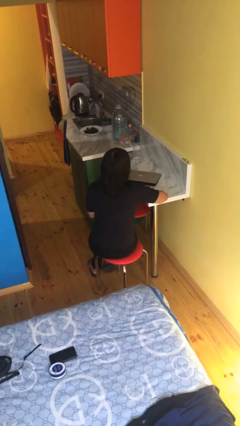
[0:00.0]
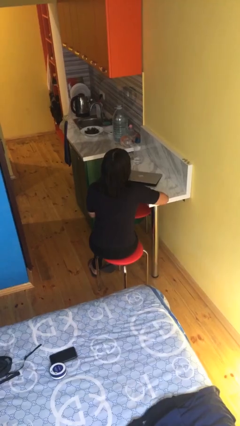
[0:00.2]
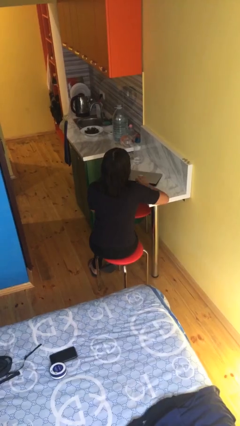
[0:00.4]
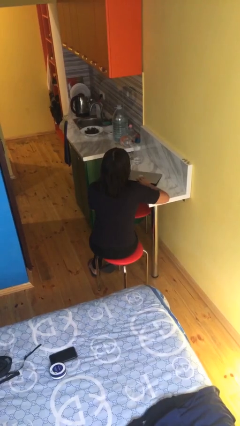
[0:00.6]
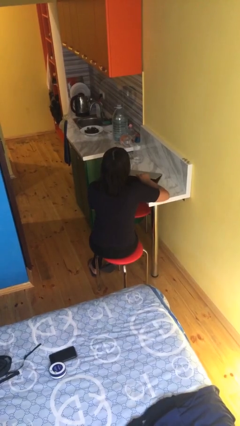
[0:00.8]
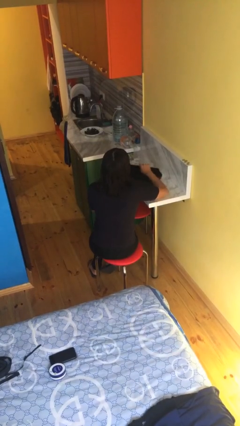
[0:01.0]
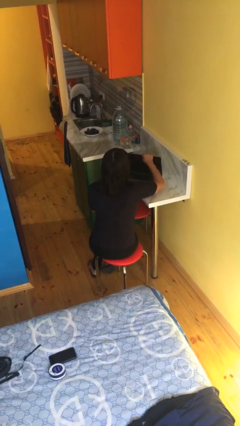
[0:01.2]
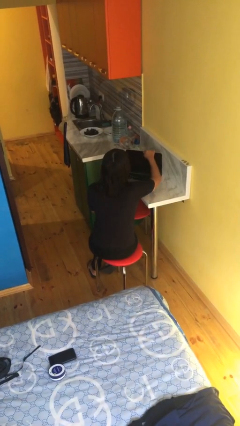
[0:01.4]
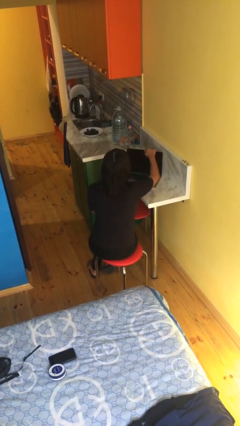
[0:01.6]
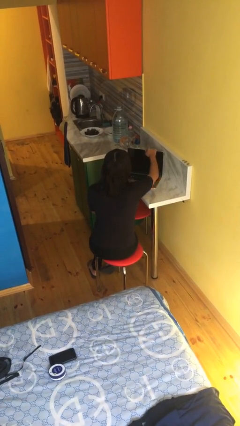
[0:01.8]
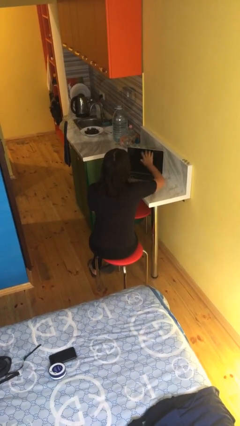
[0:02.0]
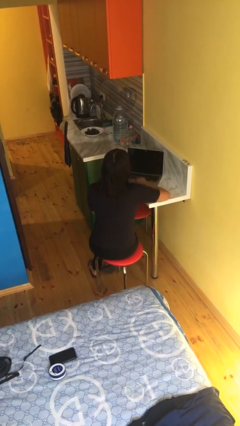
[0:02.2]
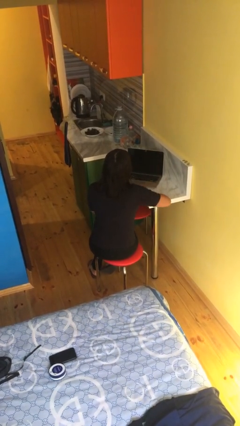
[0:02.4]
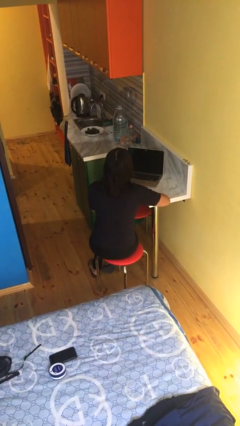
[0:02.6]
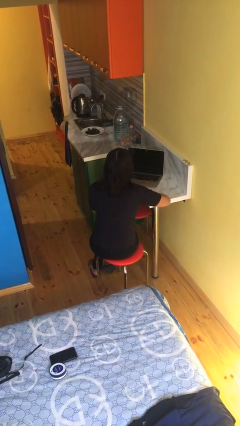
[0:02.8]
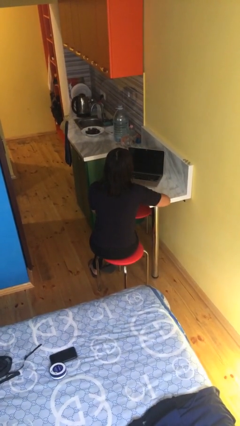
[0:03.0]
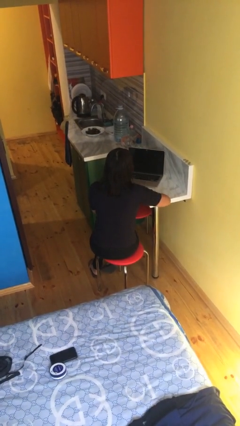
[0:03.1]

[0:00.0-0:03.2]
person opens laptop

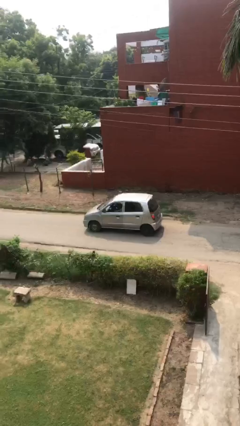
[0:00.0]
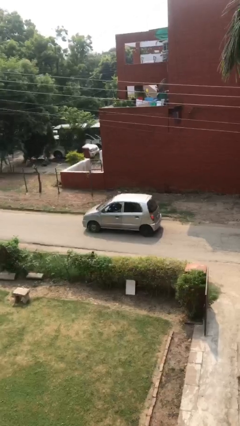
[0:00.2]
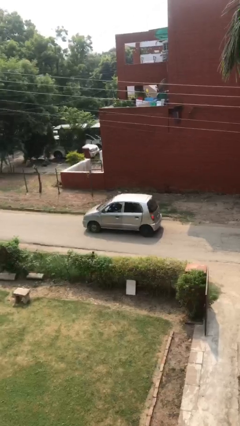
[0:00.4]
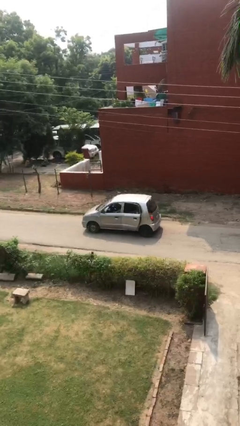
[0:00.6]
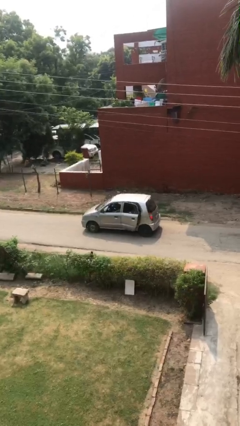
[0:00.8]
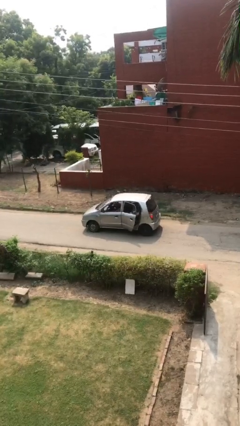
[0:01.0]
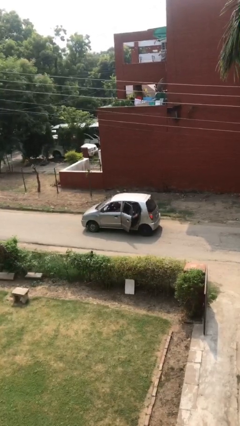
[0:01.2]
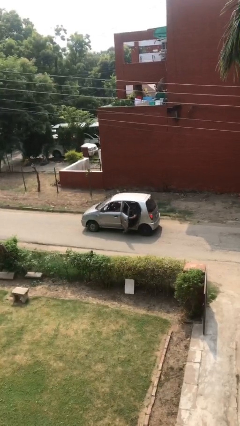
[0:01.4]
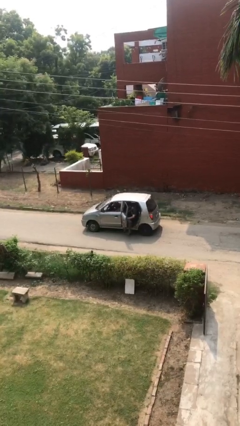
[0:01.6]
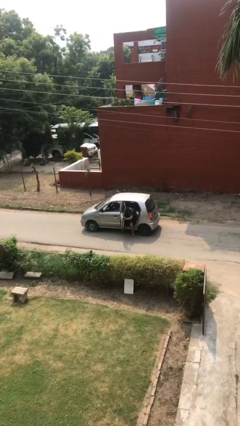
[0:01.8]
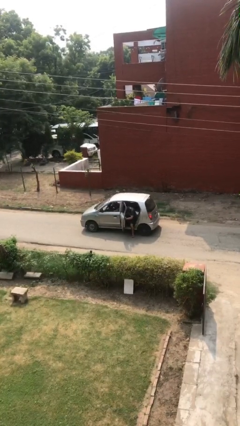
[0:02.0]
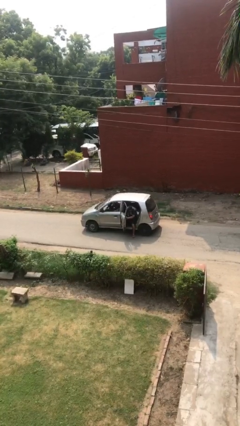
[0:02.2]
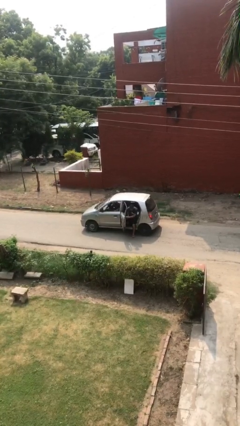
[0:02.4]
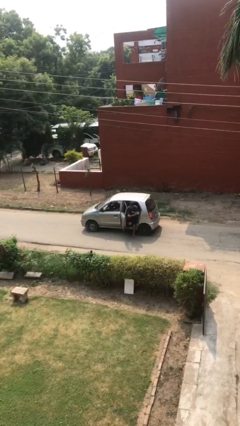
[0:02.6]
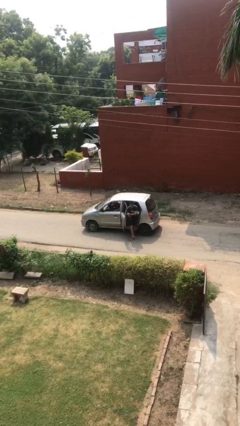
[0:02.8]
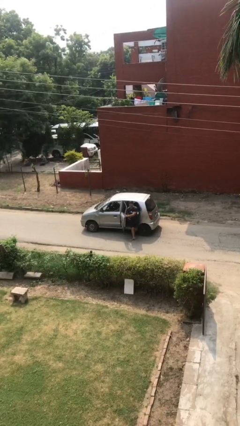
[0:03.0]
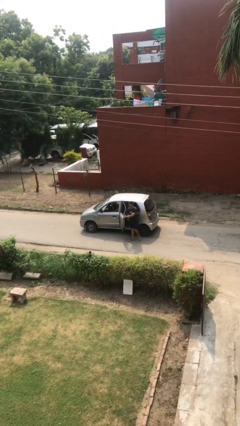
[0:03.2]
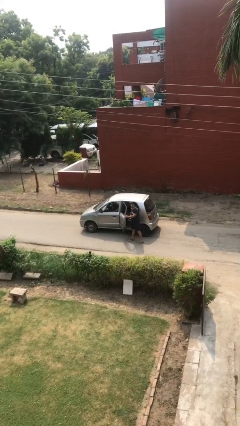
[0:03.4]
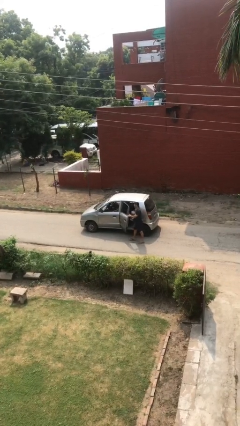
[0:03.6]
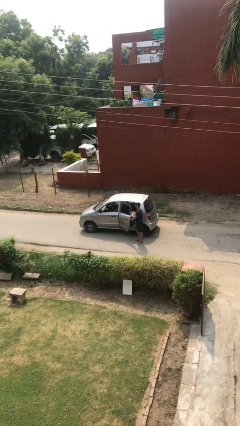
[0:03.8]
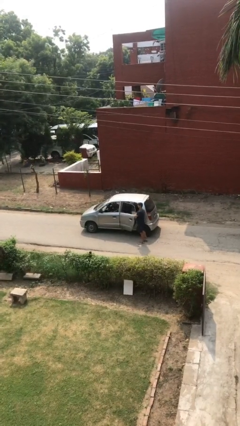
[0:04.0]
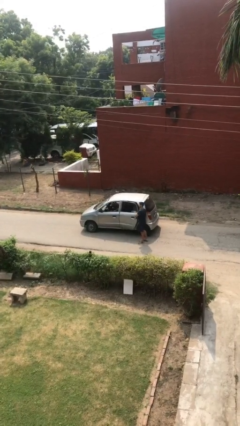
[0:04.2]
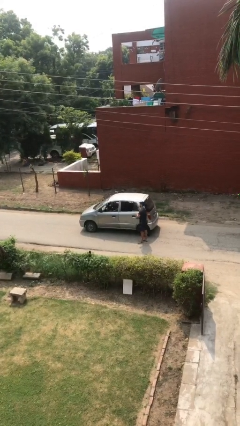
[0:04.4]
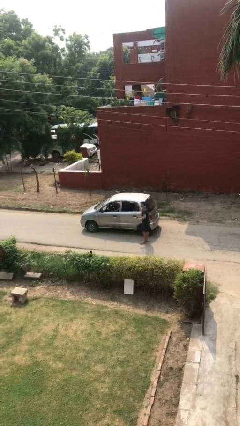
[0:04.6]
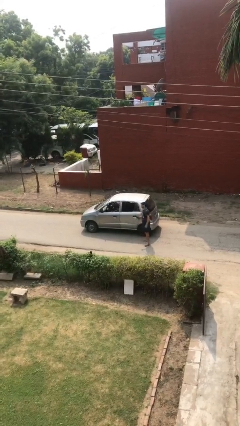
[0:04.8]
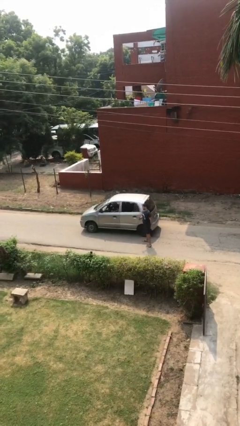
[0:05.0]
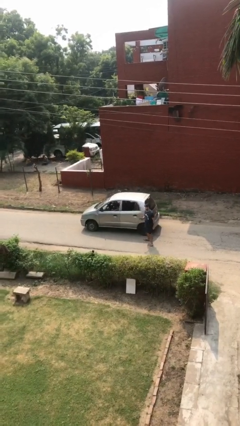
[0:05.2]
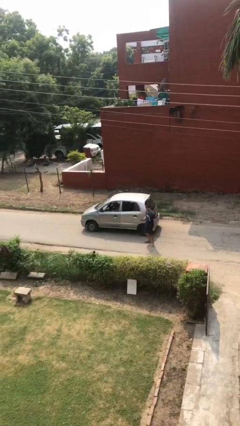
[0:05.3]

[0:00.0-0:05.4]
car drops off person

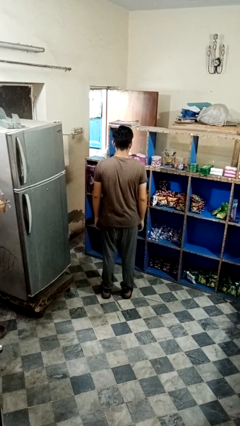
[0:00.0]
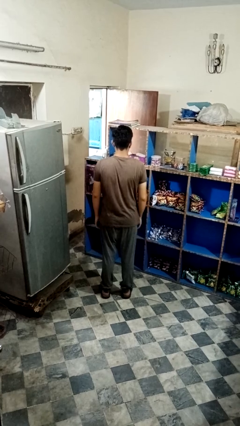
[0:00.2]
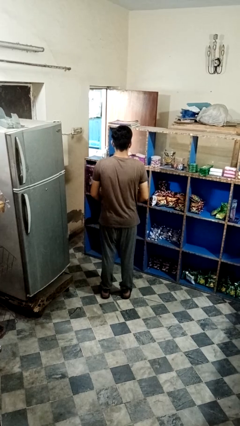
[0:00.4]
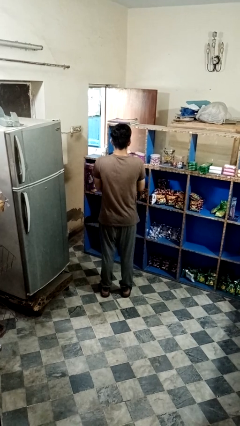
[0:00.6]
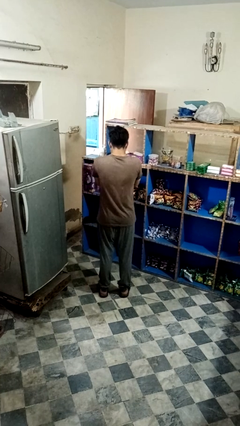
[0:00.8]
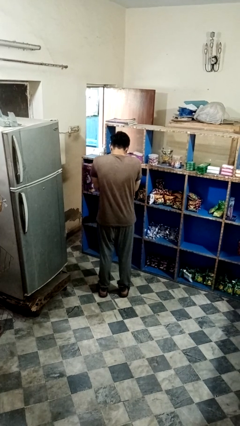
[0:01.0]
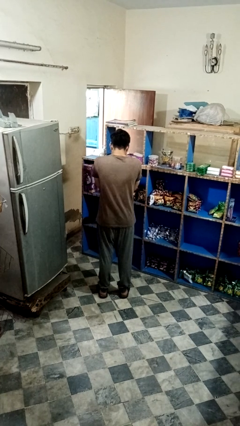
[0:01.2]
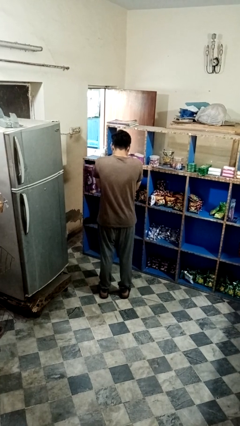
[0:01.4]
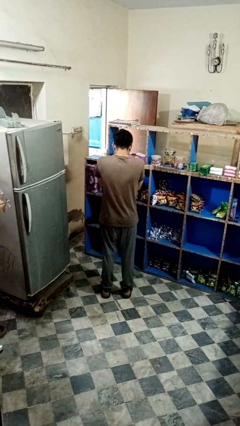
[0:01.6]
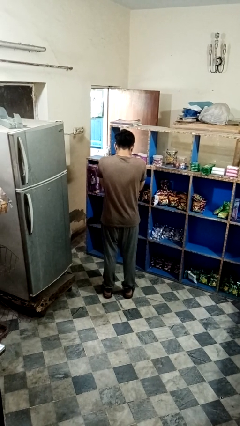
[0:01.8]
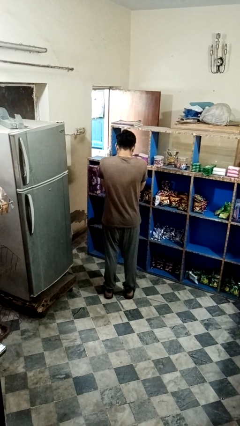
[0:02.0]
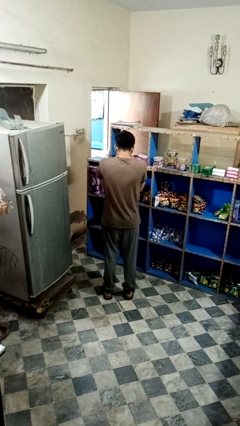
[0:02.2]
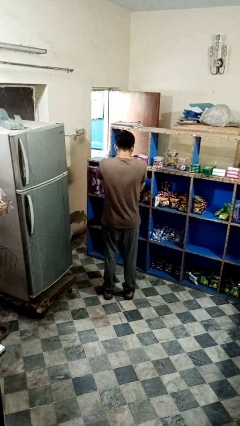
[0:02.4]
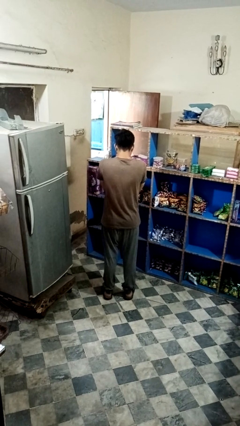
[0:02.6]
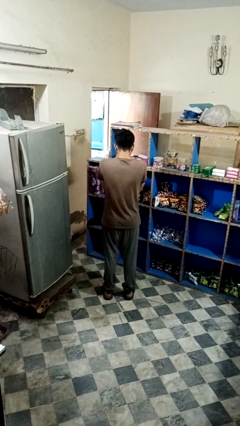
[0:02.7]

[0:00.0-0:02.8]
person sneezes into hand

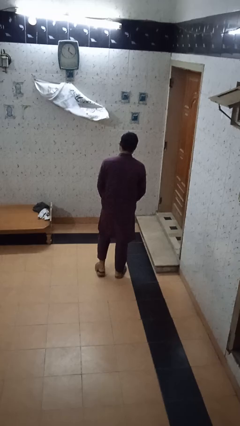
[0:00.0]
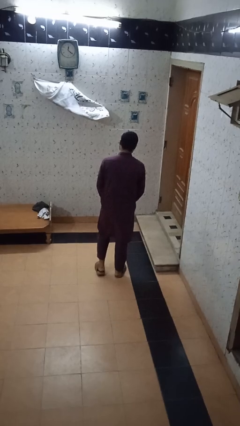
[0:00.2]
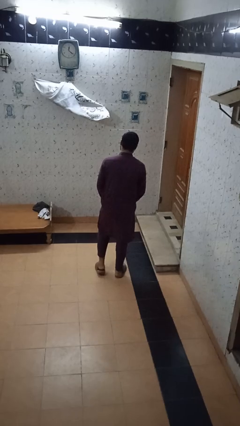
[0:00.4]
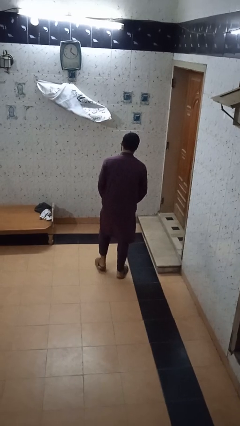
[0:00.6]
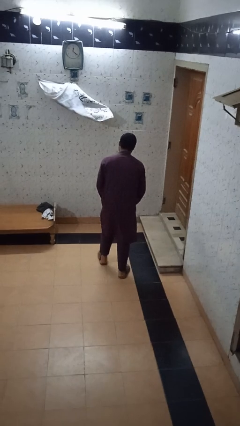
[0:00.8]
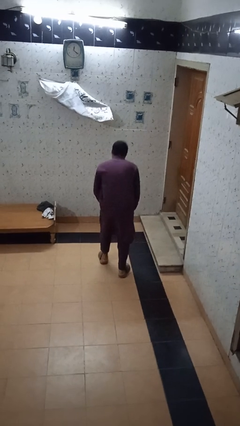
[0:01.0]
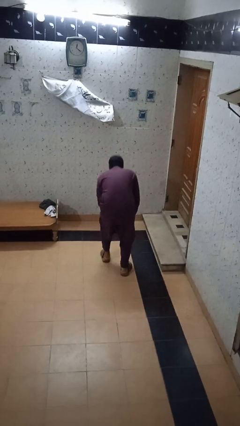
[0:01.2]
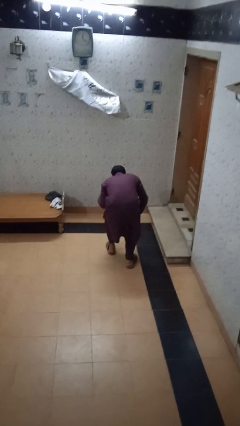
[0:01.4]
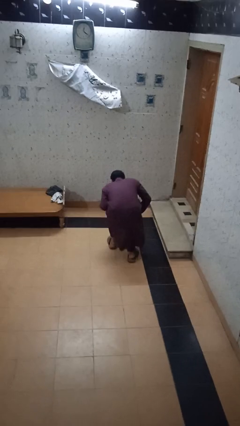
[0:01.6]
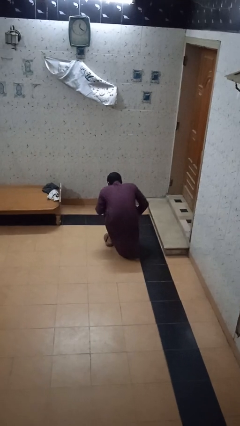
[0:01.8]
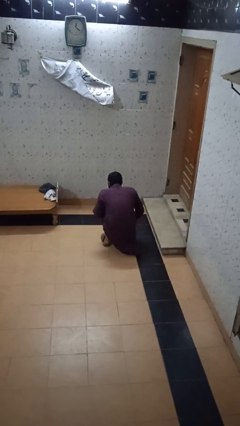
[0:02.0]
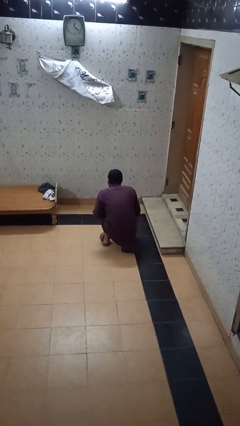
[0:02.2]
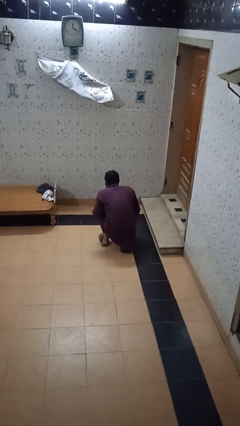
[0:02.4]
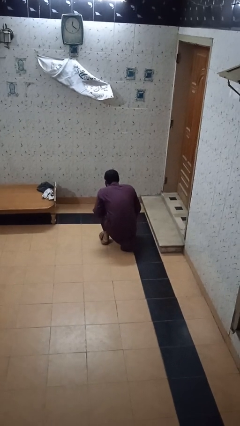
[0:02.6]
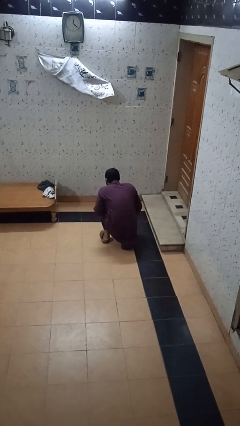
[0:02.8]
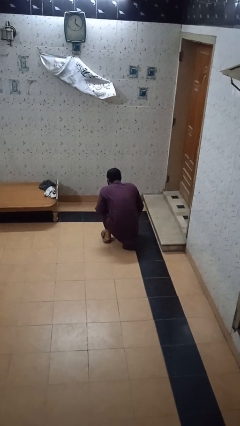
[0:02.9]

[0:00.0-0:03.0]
person kneels

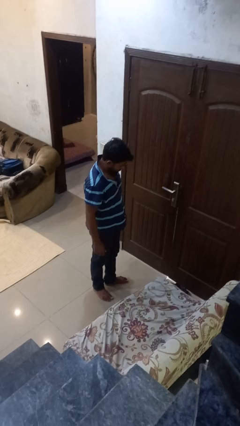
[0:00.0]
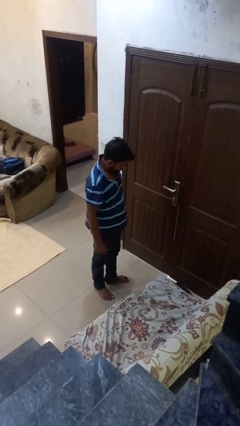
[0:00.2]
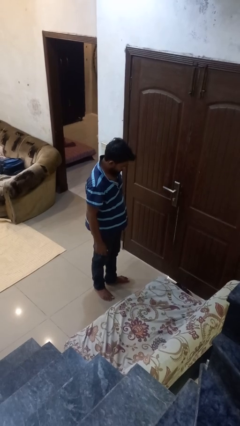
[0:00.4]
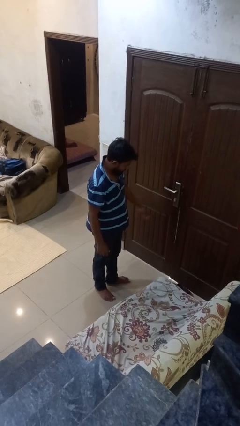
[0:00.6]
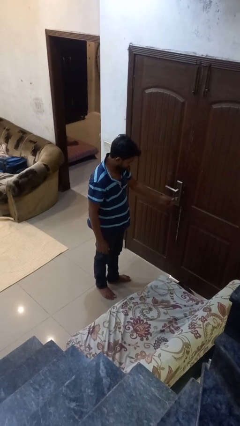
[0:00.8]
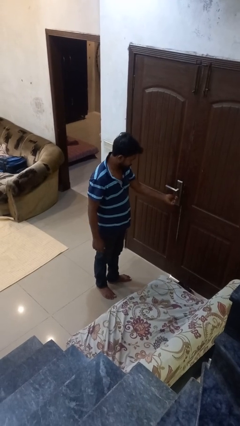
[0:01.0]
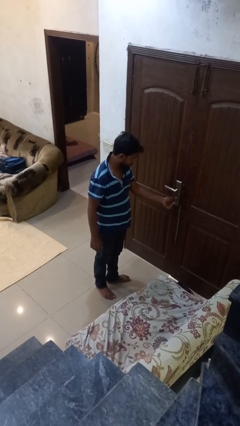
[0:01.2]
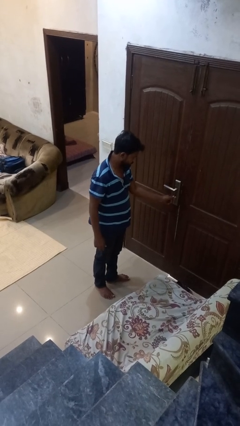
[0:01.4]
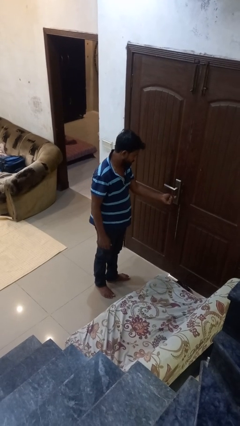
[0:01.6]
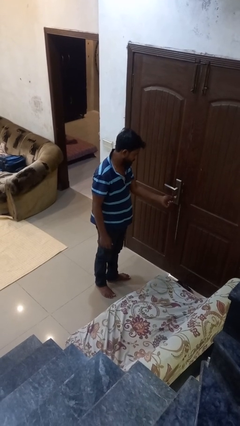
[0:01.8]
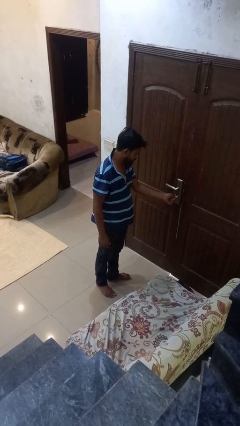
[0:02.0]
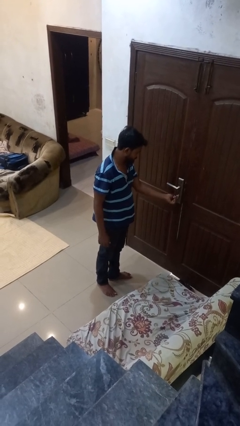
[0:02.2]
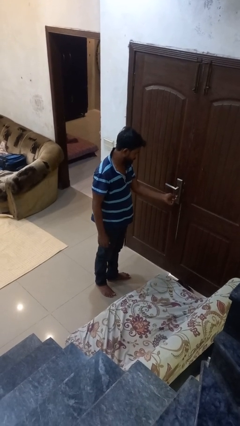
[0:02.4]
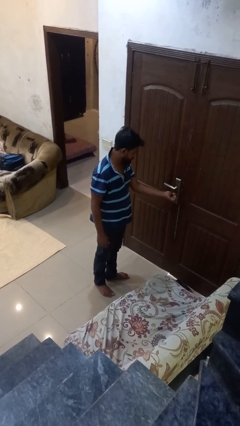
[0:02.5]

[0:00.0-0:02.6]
person unlocks door with keys

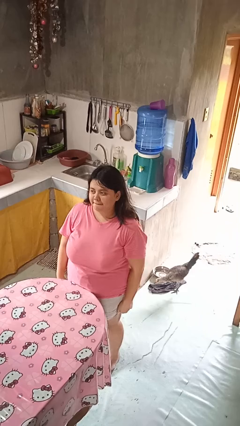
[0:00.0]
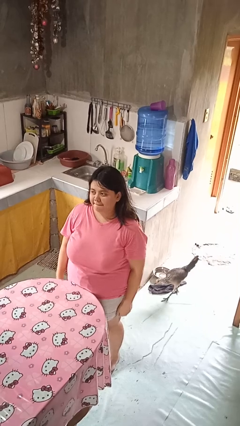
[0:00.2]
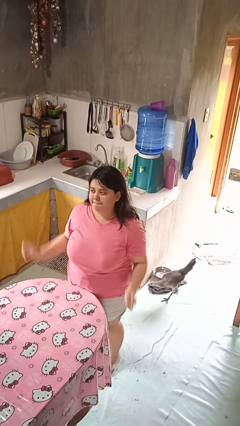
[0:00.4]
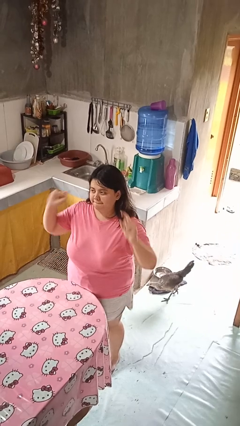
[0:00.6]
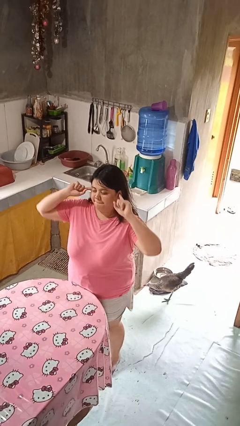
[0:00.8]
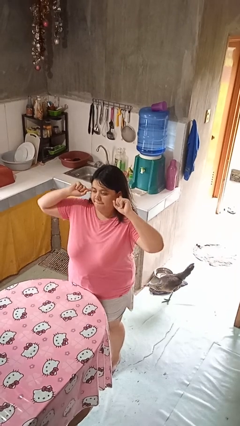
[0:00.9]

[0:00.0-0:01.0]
person puts fingers in ear
